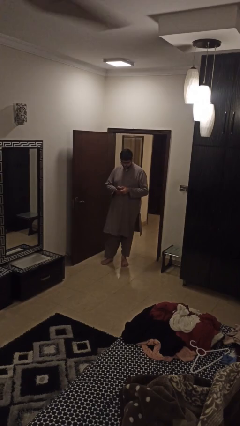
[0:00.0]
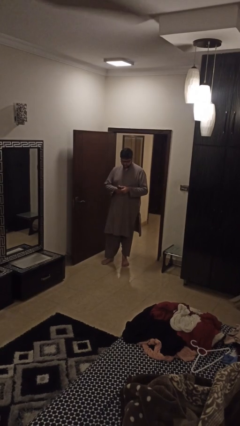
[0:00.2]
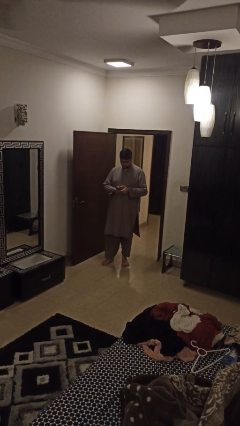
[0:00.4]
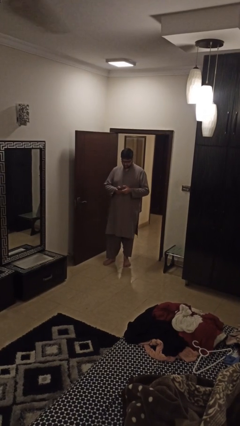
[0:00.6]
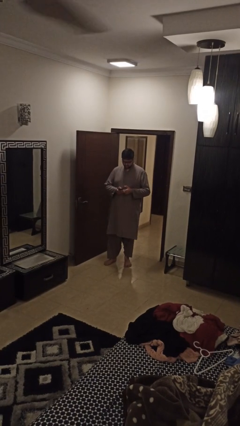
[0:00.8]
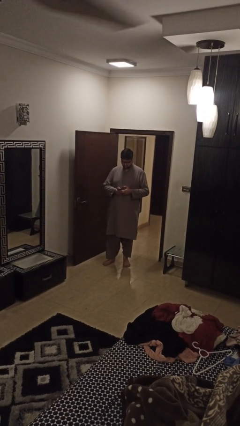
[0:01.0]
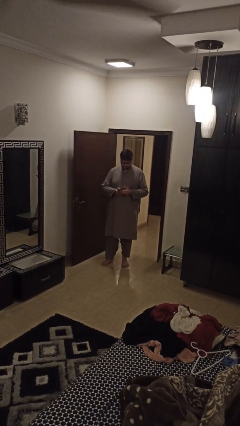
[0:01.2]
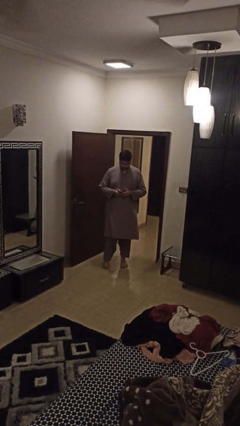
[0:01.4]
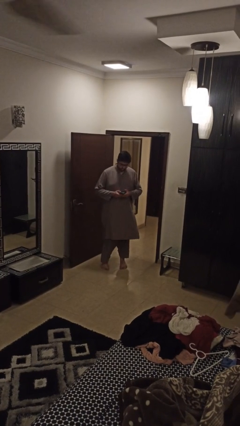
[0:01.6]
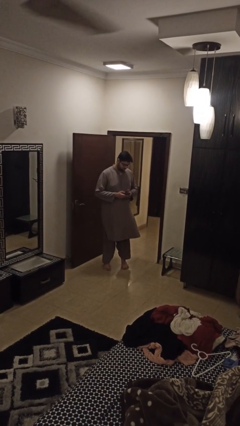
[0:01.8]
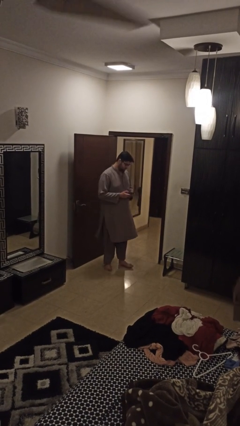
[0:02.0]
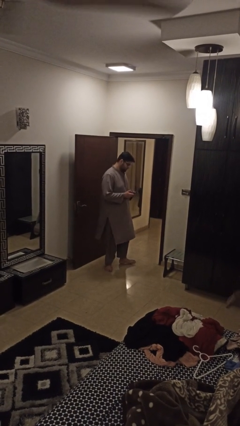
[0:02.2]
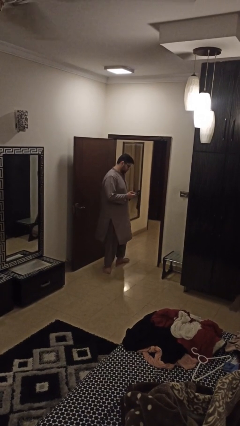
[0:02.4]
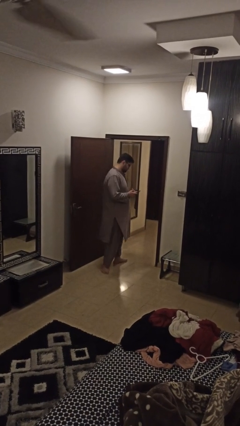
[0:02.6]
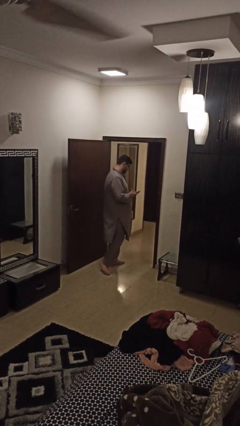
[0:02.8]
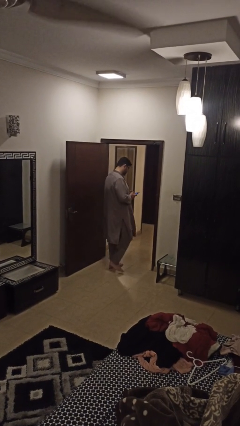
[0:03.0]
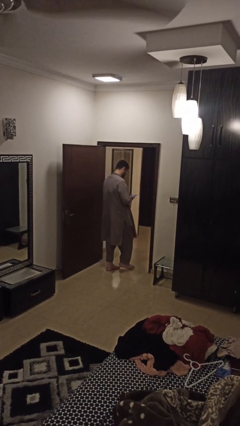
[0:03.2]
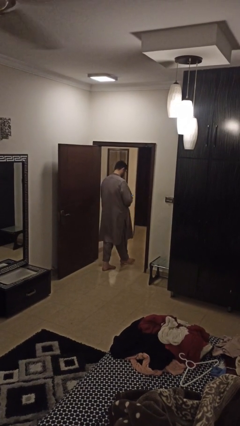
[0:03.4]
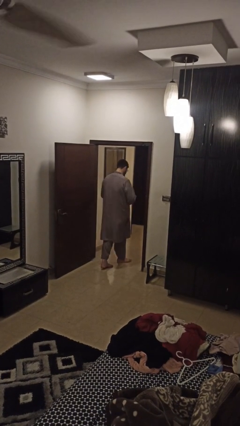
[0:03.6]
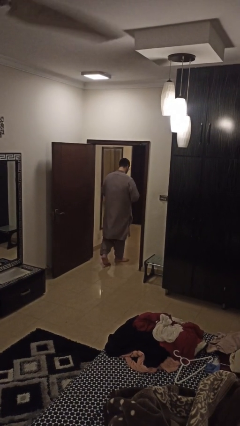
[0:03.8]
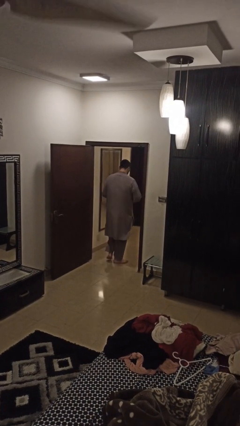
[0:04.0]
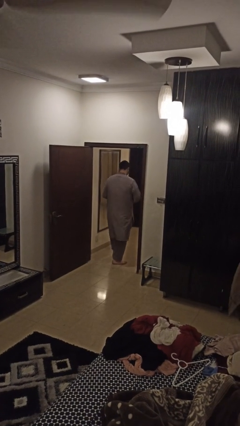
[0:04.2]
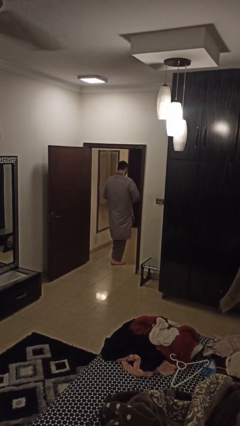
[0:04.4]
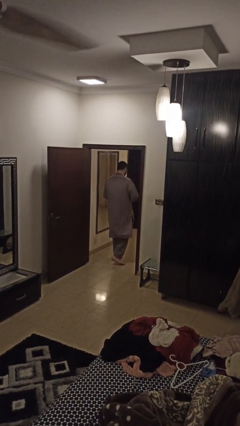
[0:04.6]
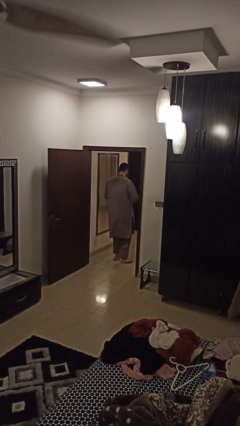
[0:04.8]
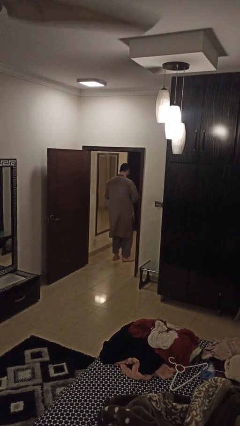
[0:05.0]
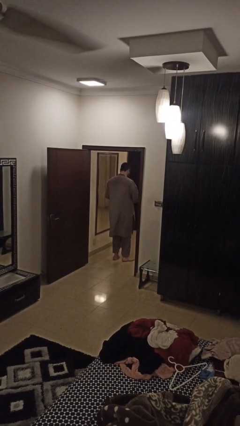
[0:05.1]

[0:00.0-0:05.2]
person exits scene through structure

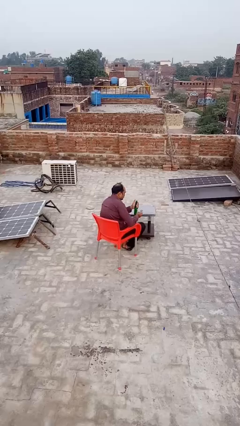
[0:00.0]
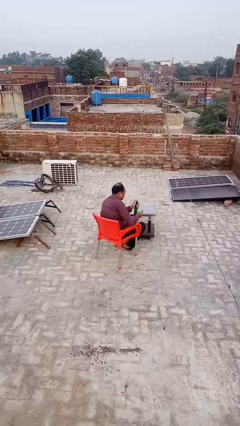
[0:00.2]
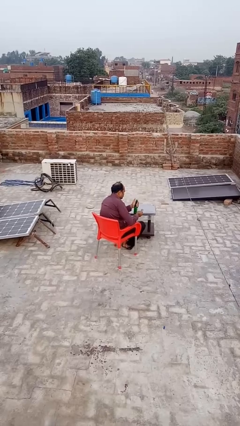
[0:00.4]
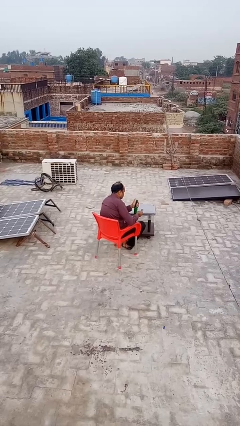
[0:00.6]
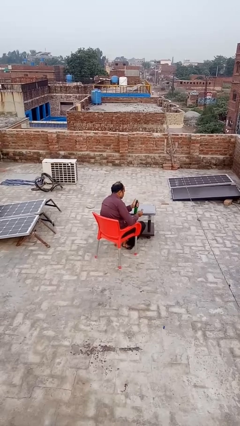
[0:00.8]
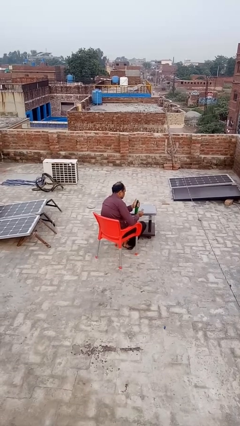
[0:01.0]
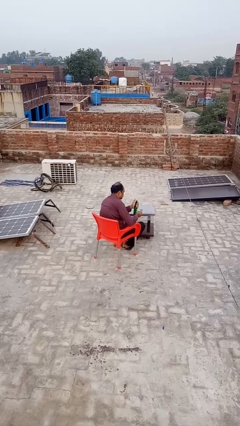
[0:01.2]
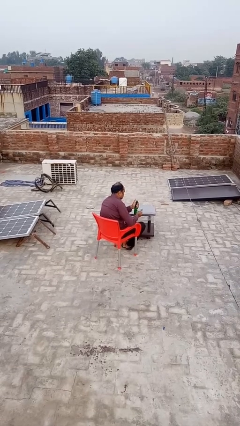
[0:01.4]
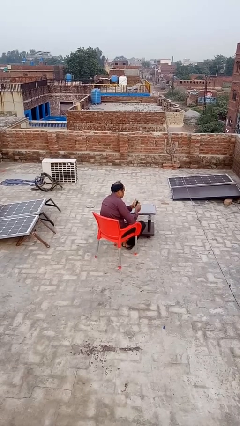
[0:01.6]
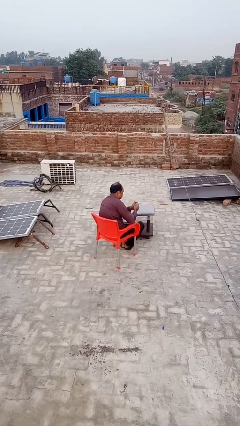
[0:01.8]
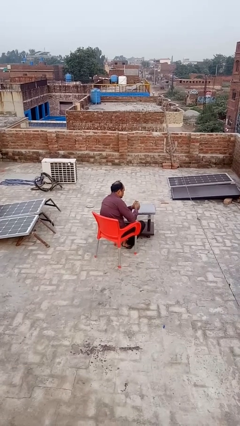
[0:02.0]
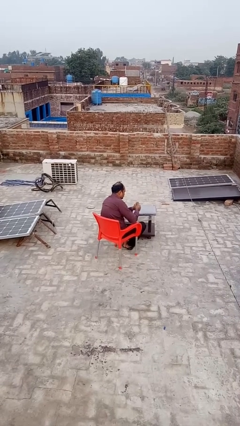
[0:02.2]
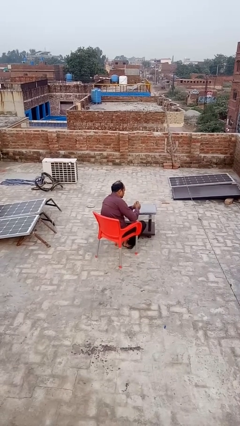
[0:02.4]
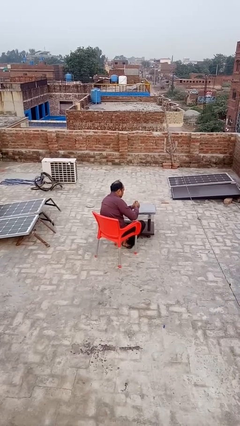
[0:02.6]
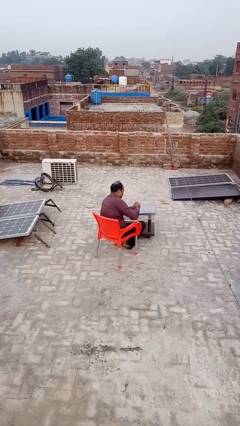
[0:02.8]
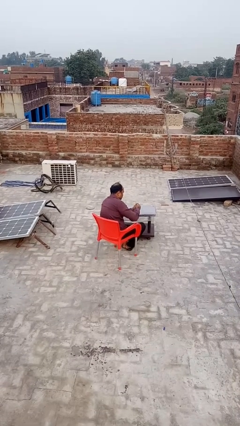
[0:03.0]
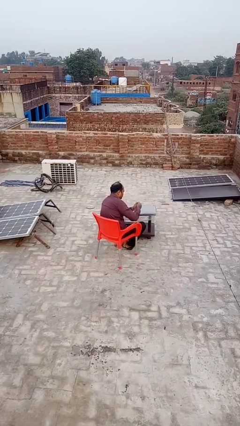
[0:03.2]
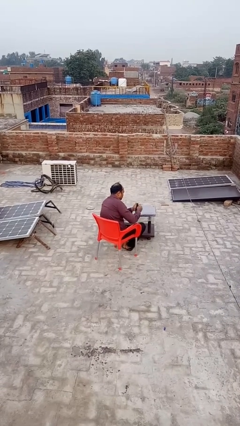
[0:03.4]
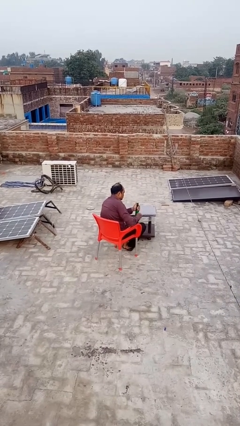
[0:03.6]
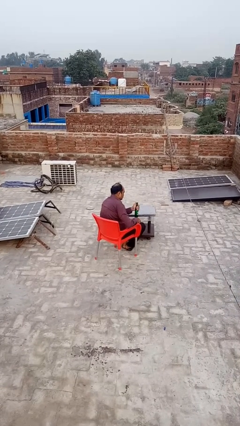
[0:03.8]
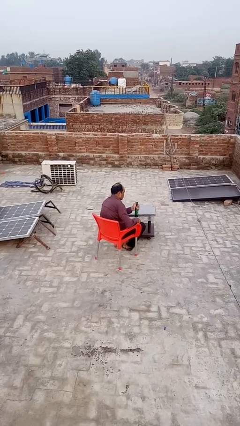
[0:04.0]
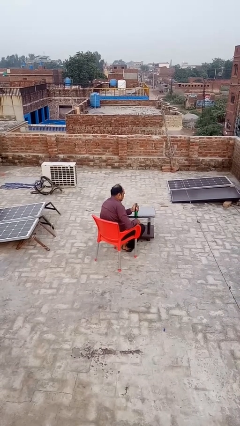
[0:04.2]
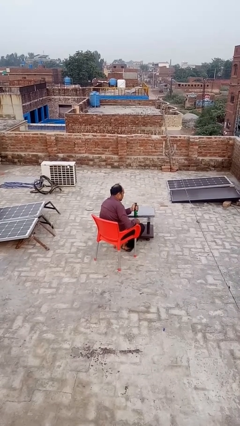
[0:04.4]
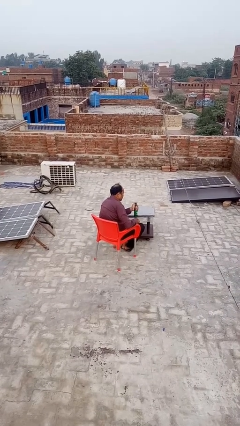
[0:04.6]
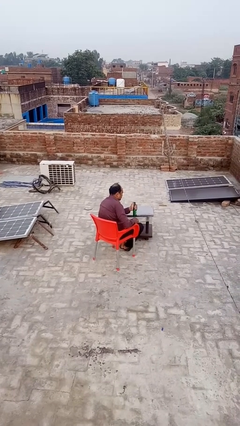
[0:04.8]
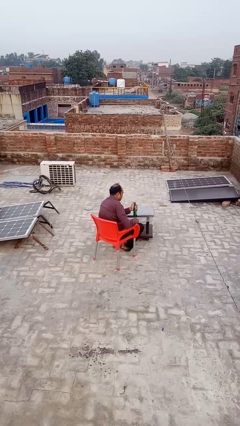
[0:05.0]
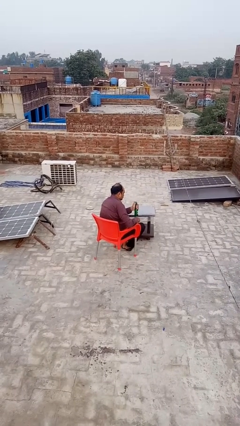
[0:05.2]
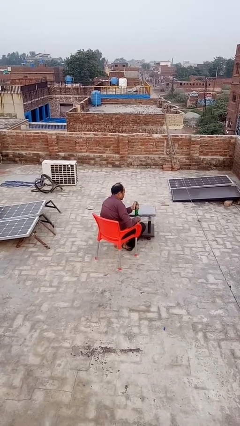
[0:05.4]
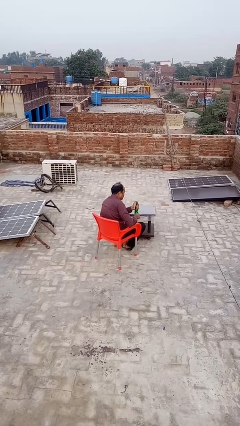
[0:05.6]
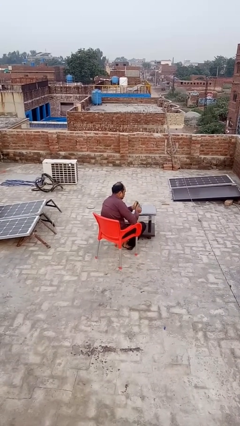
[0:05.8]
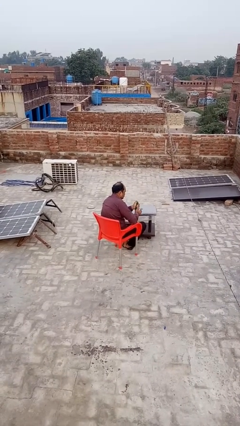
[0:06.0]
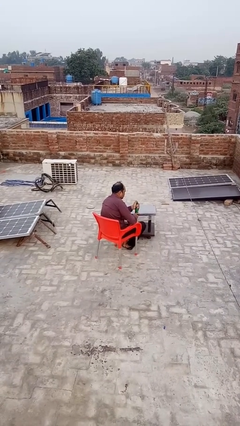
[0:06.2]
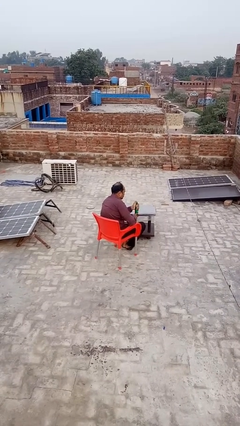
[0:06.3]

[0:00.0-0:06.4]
person opens can with can opener

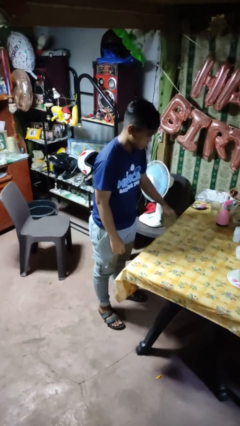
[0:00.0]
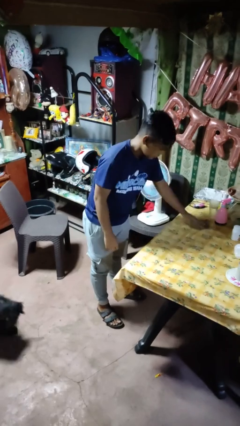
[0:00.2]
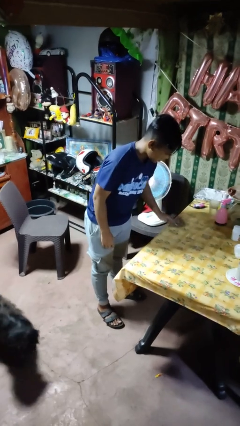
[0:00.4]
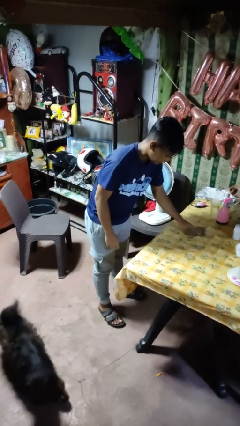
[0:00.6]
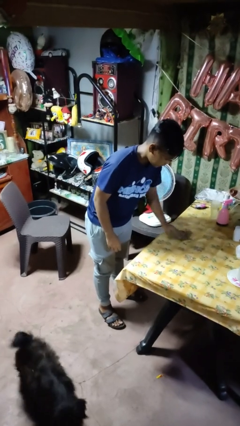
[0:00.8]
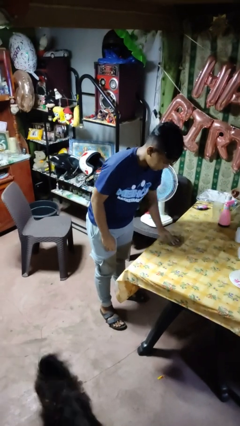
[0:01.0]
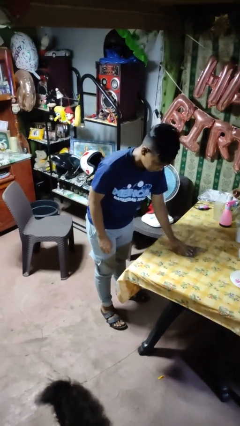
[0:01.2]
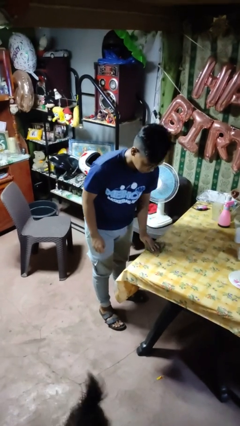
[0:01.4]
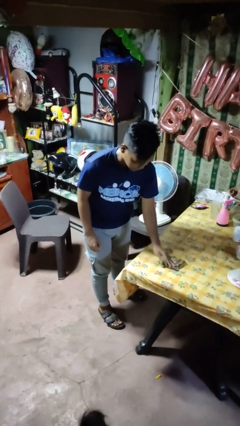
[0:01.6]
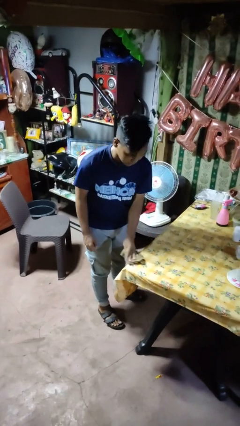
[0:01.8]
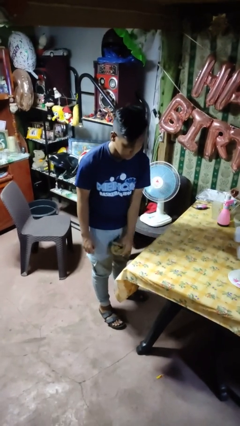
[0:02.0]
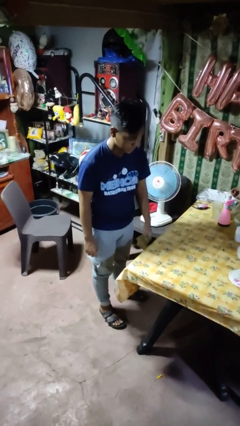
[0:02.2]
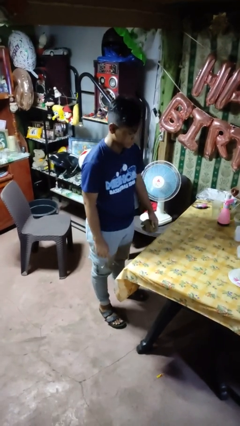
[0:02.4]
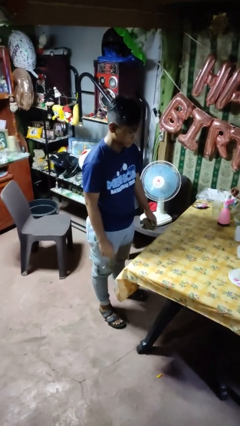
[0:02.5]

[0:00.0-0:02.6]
person cleans table with rag

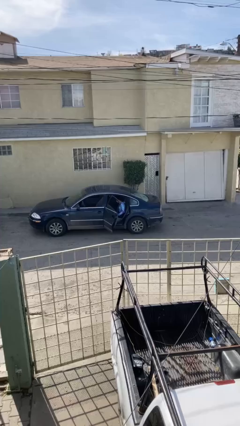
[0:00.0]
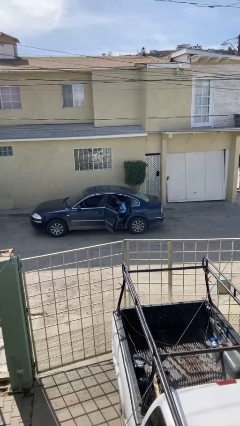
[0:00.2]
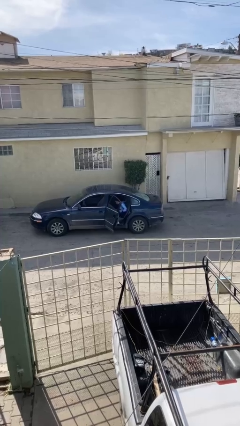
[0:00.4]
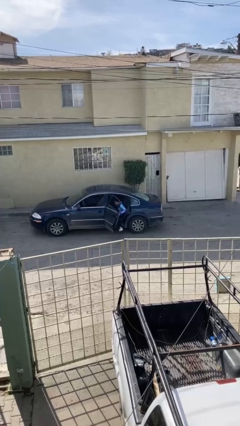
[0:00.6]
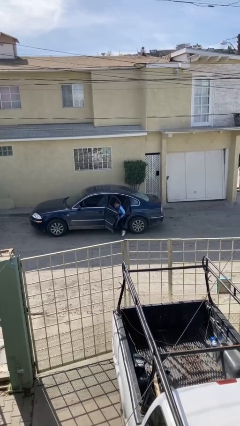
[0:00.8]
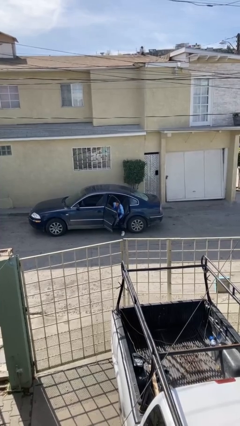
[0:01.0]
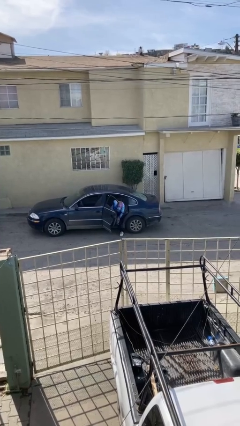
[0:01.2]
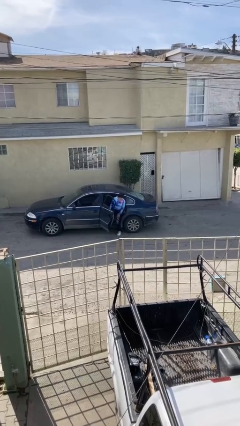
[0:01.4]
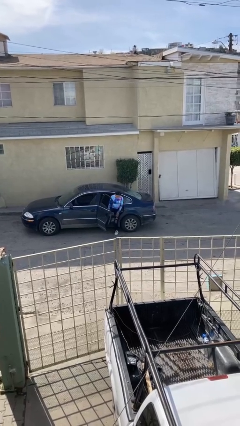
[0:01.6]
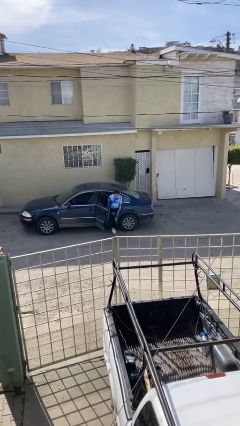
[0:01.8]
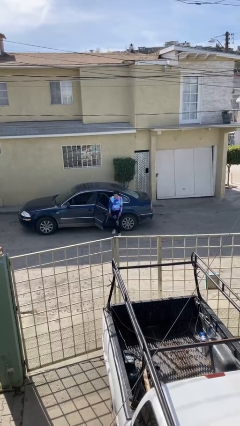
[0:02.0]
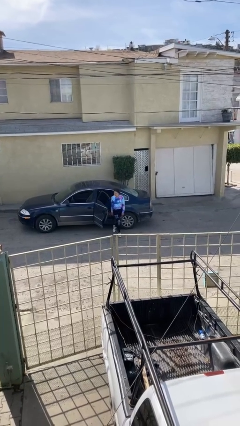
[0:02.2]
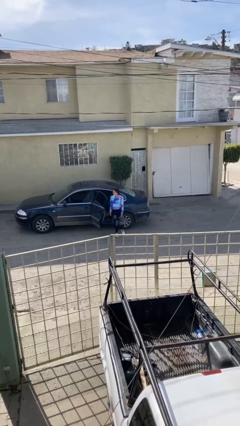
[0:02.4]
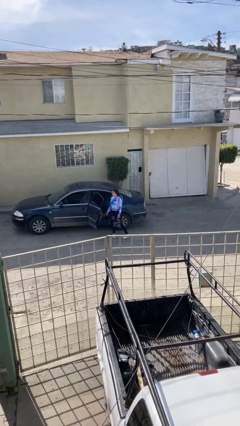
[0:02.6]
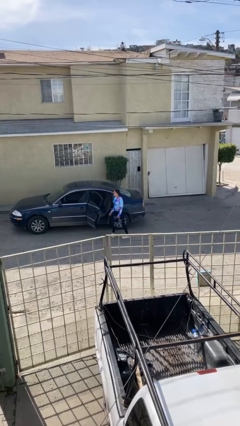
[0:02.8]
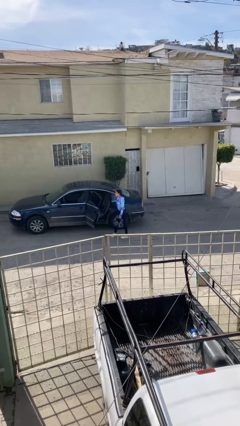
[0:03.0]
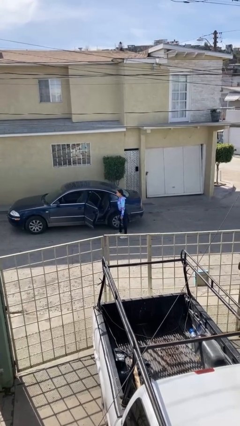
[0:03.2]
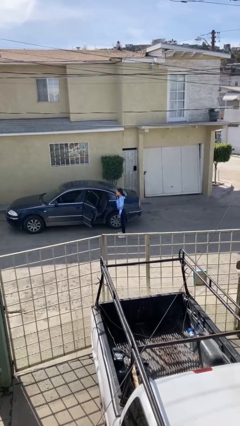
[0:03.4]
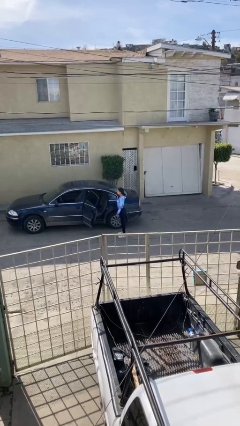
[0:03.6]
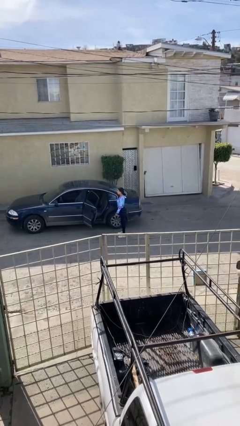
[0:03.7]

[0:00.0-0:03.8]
person exits car
